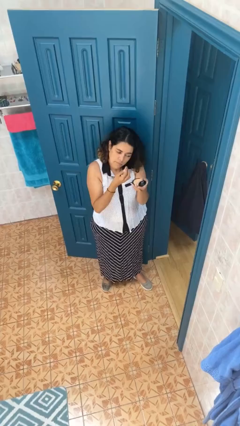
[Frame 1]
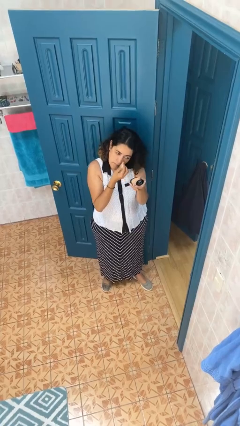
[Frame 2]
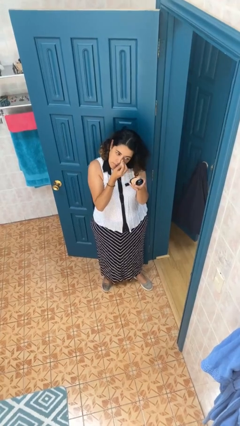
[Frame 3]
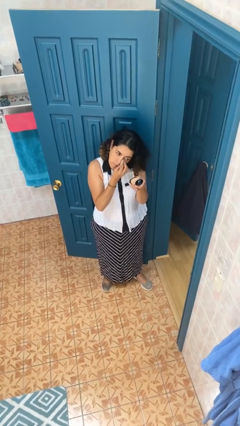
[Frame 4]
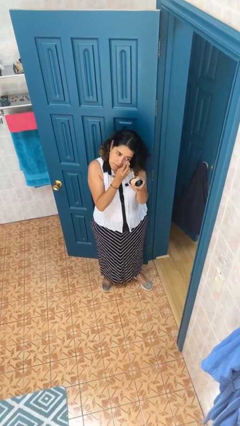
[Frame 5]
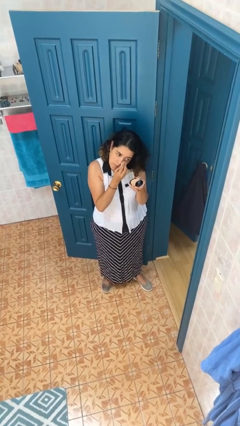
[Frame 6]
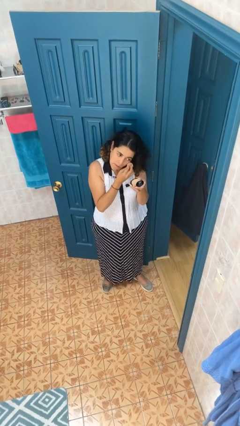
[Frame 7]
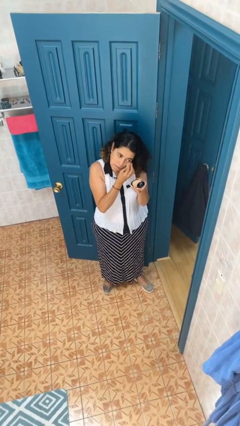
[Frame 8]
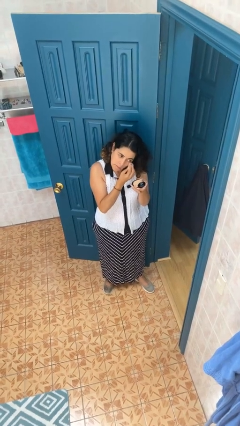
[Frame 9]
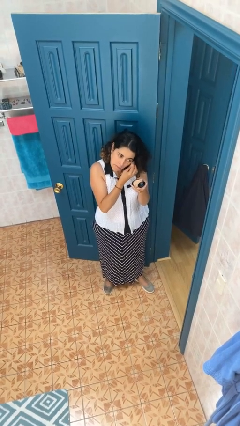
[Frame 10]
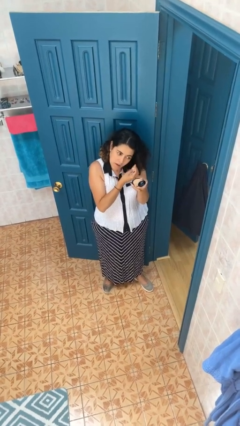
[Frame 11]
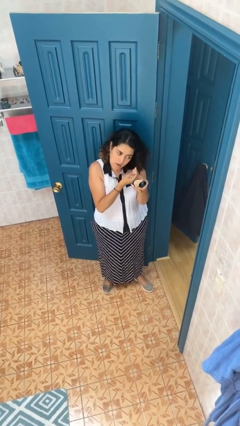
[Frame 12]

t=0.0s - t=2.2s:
person applies foundation makeup

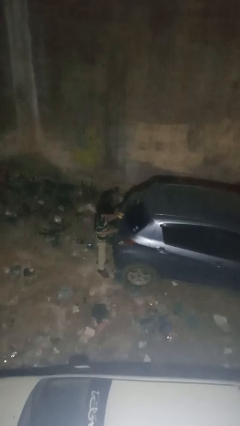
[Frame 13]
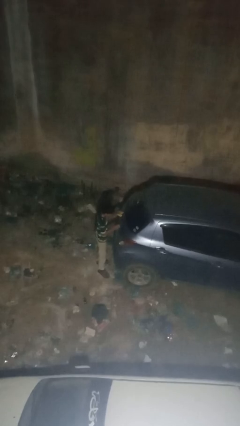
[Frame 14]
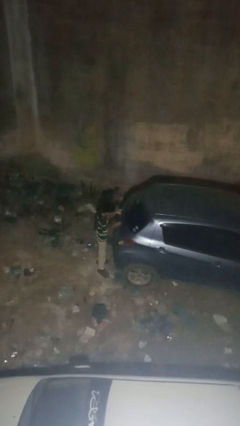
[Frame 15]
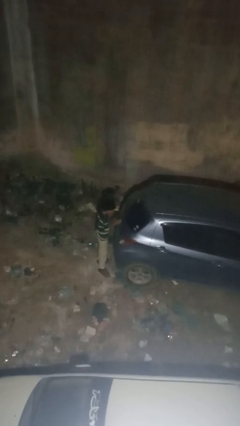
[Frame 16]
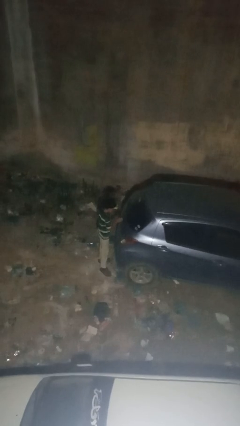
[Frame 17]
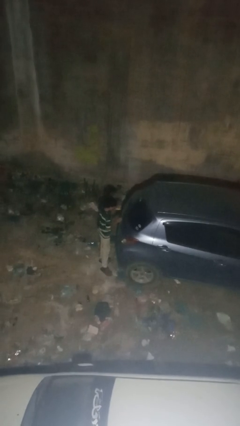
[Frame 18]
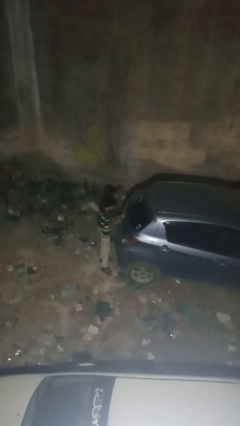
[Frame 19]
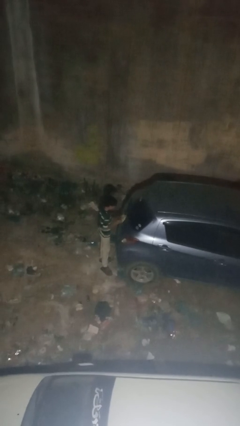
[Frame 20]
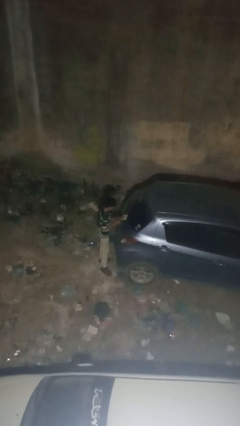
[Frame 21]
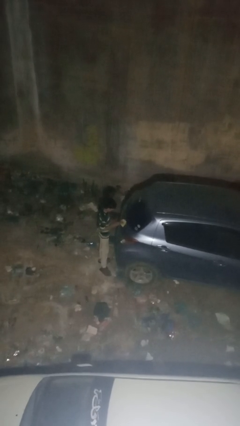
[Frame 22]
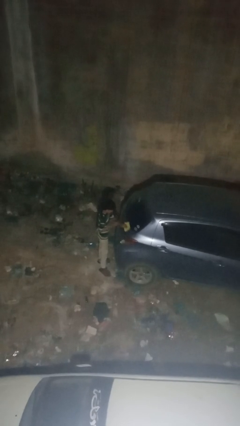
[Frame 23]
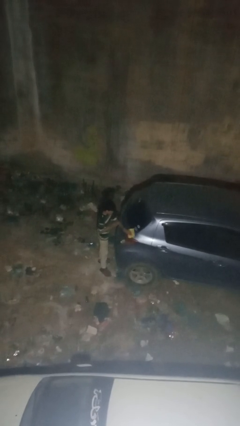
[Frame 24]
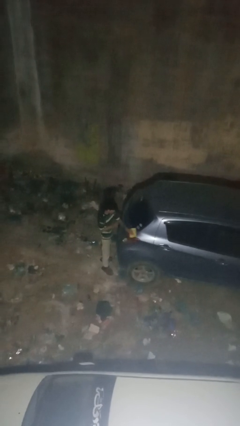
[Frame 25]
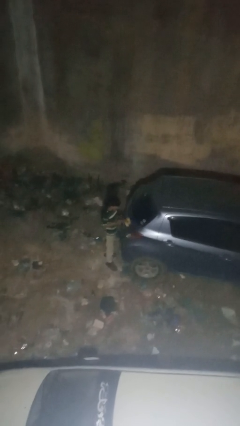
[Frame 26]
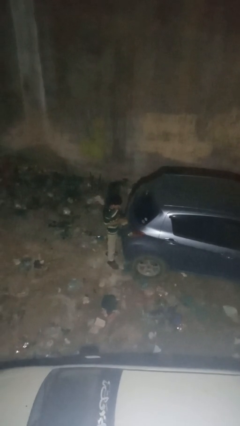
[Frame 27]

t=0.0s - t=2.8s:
person polishes car with rag

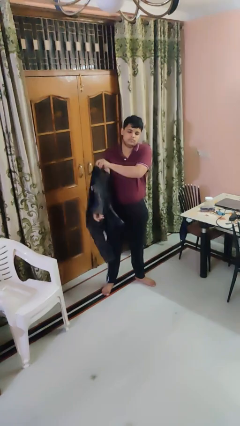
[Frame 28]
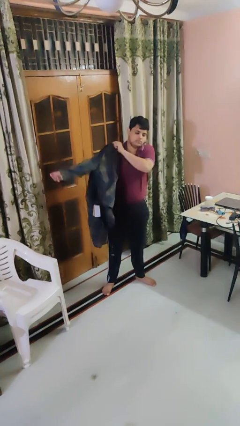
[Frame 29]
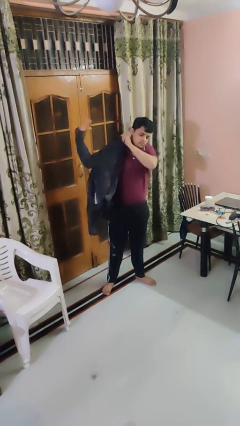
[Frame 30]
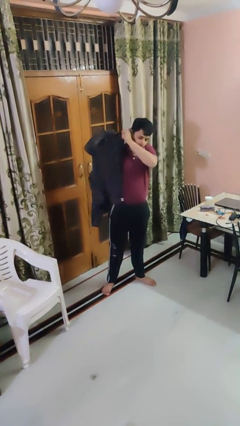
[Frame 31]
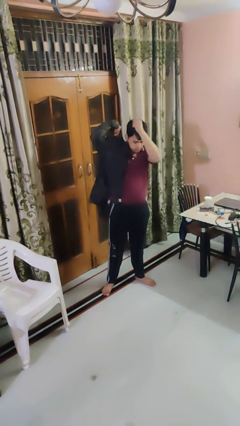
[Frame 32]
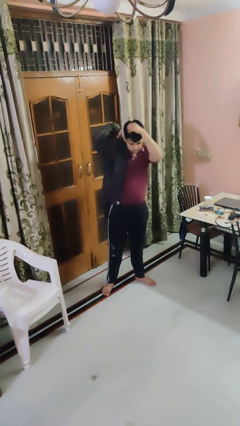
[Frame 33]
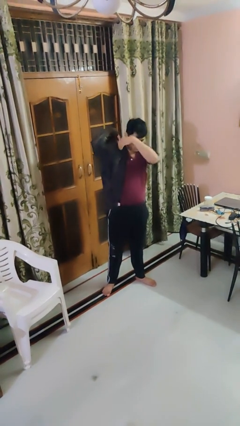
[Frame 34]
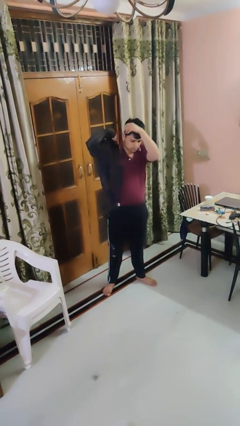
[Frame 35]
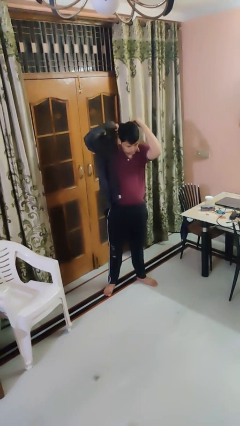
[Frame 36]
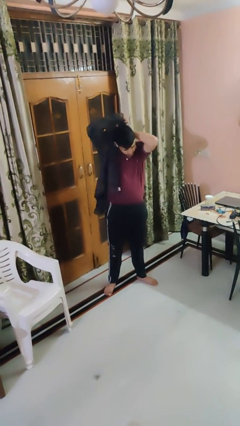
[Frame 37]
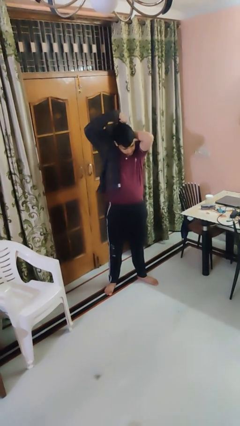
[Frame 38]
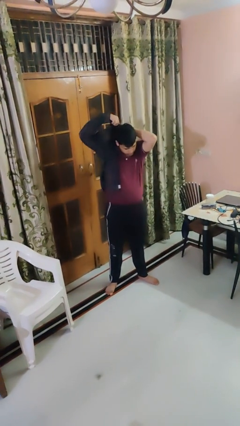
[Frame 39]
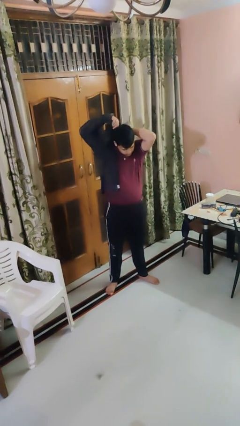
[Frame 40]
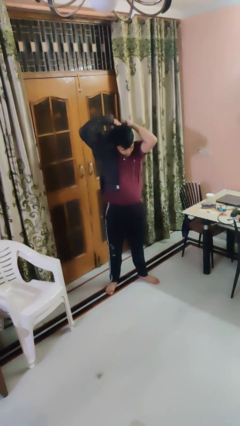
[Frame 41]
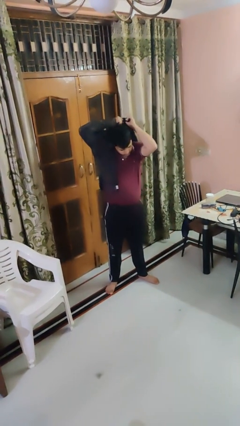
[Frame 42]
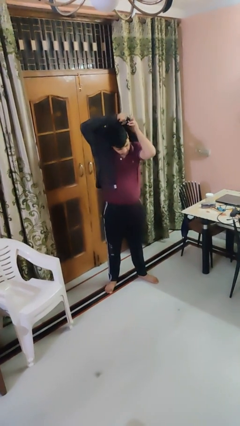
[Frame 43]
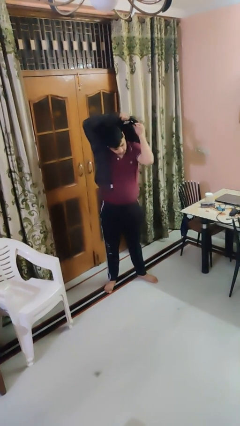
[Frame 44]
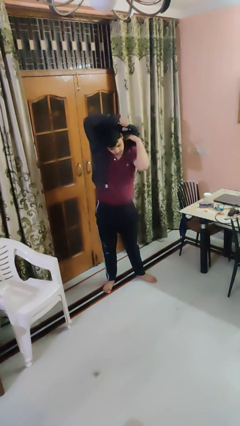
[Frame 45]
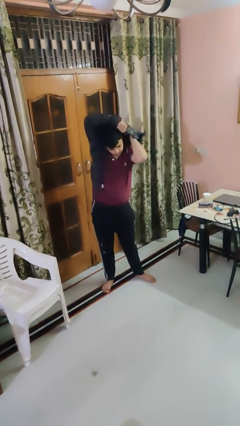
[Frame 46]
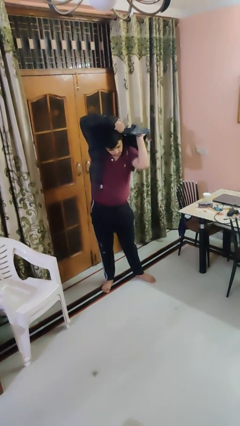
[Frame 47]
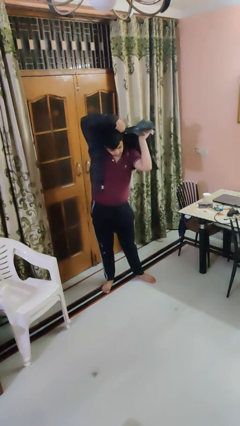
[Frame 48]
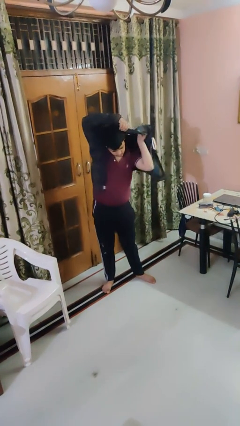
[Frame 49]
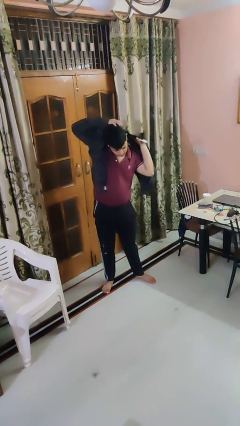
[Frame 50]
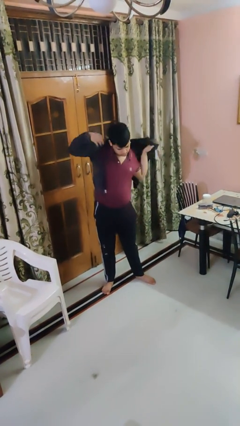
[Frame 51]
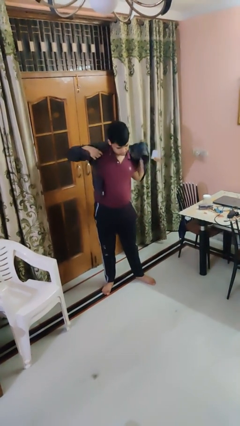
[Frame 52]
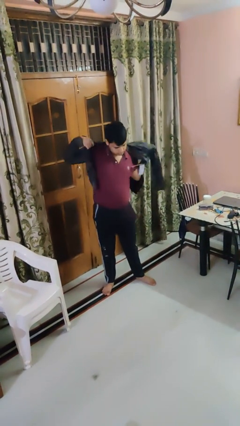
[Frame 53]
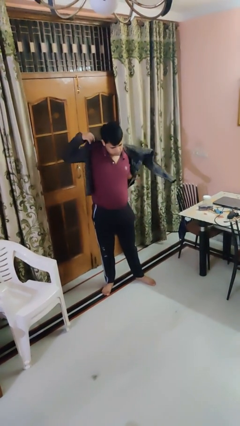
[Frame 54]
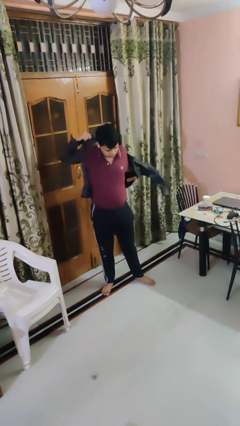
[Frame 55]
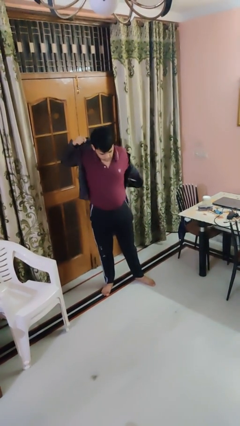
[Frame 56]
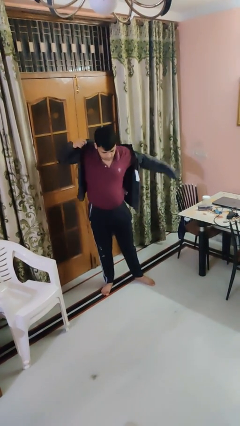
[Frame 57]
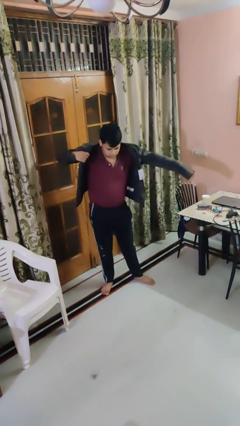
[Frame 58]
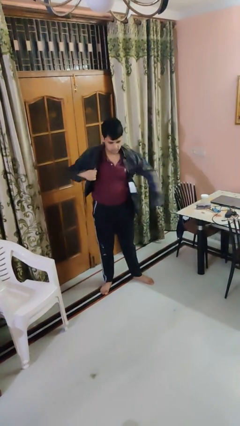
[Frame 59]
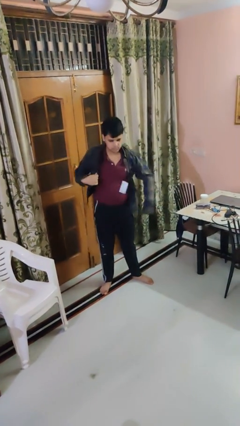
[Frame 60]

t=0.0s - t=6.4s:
person puts on shirt

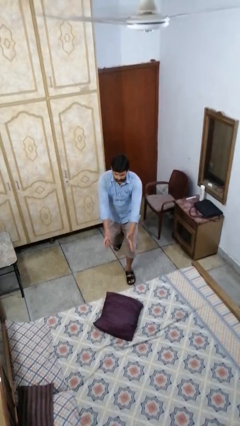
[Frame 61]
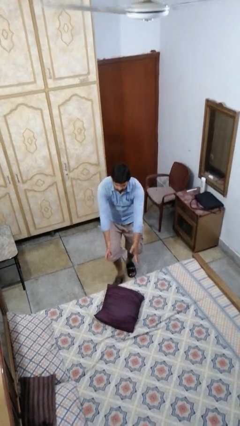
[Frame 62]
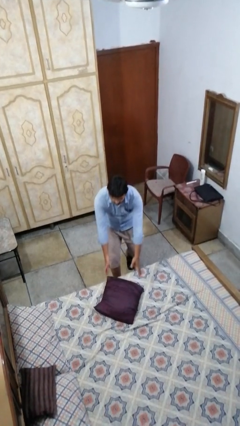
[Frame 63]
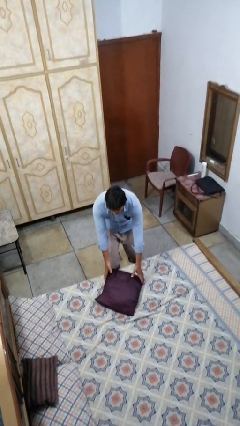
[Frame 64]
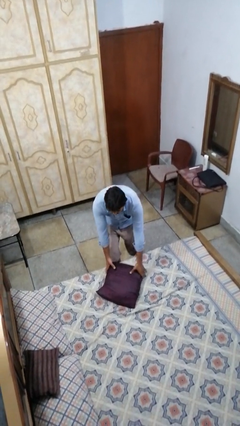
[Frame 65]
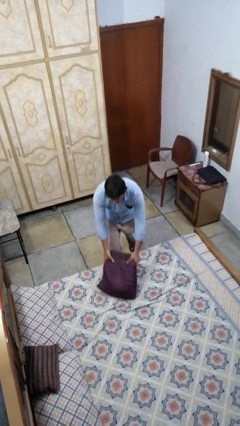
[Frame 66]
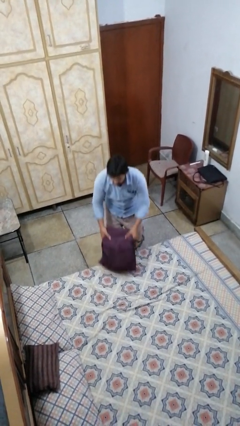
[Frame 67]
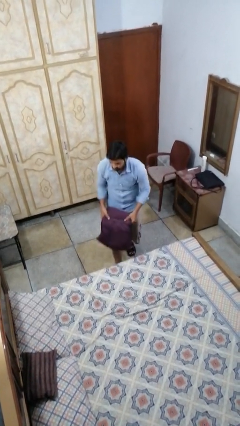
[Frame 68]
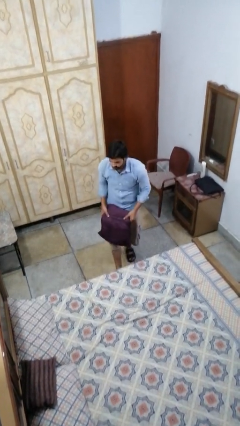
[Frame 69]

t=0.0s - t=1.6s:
person picks up object from bed

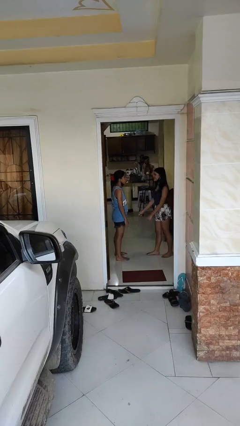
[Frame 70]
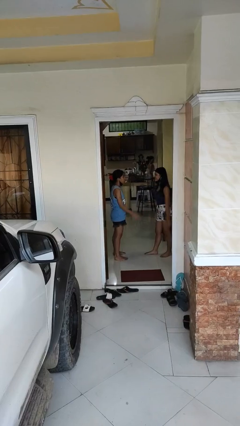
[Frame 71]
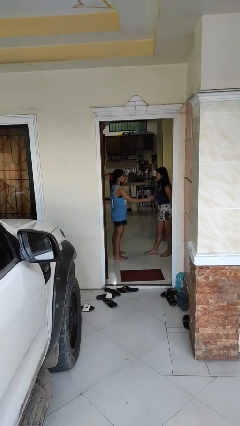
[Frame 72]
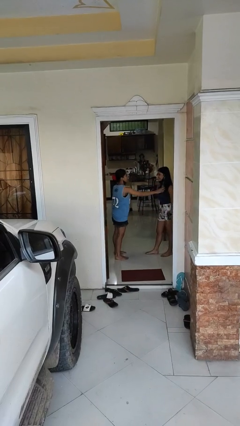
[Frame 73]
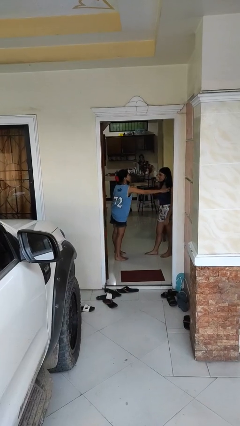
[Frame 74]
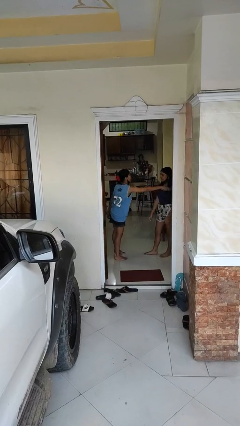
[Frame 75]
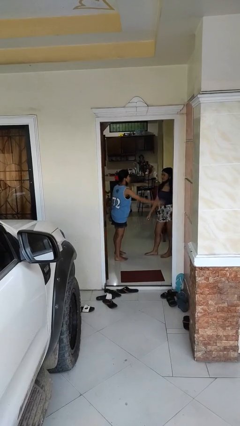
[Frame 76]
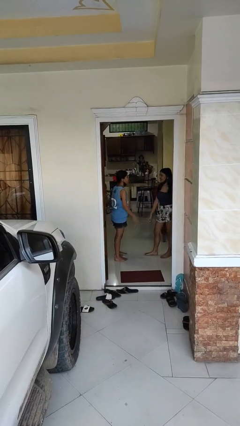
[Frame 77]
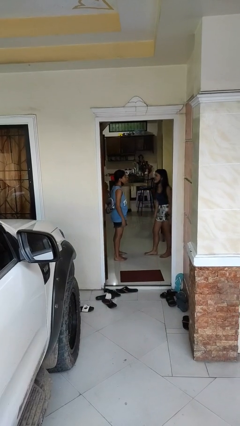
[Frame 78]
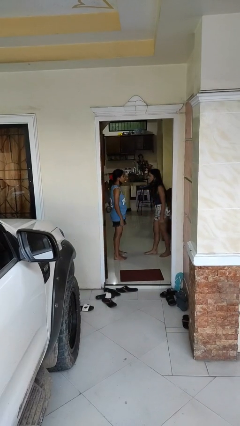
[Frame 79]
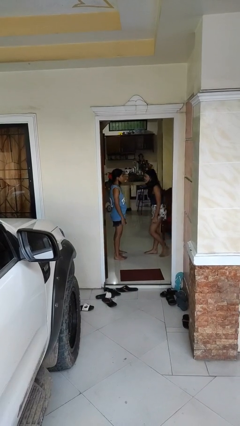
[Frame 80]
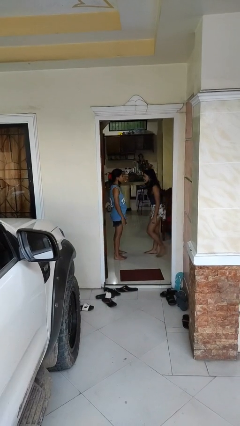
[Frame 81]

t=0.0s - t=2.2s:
person shoves person

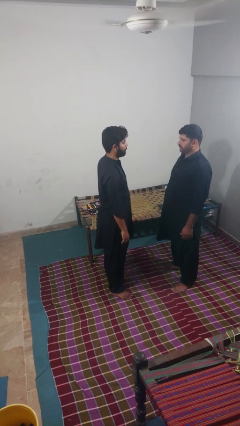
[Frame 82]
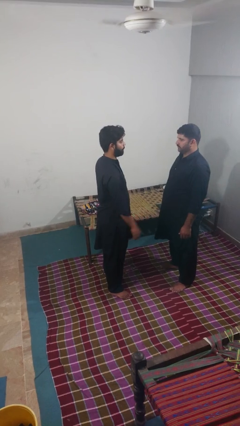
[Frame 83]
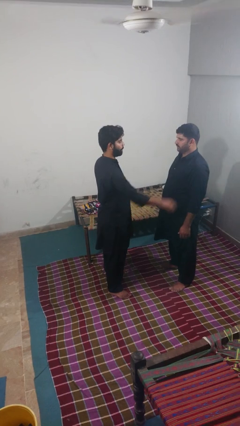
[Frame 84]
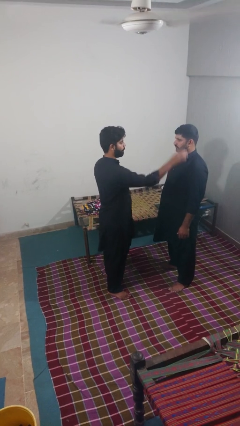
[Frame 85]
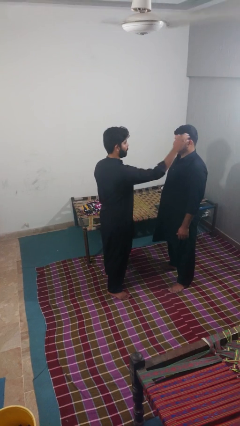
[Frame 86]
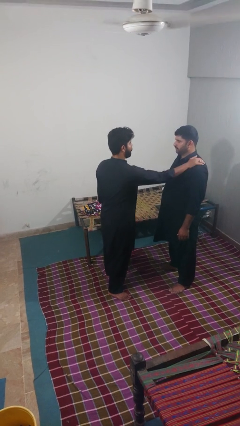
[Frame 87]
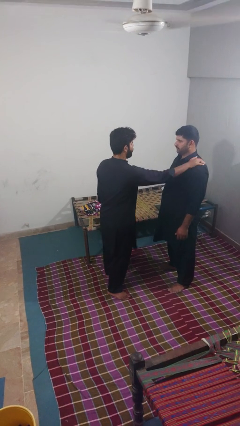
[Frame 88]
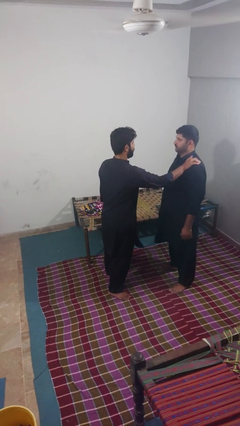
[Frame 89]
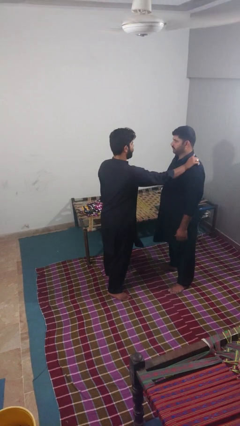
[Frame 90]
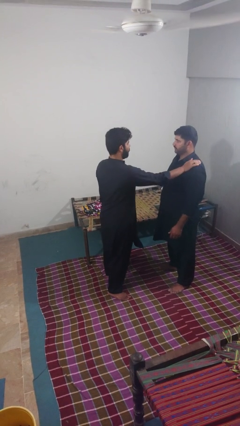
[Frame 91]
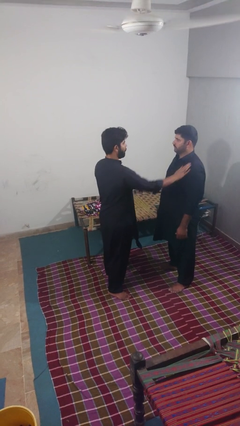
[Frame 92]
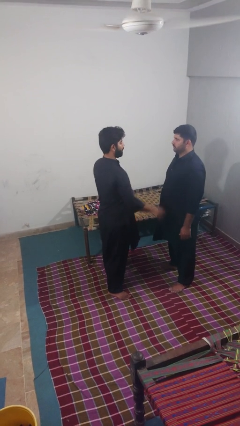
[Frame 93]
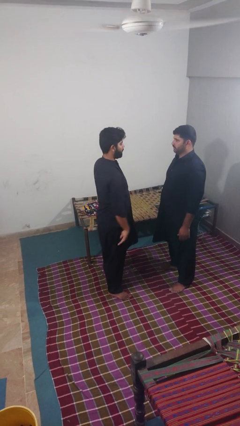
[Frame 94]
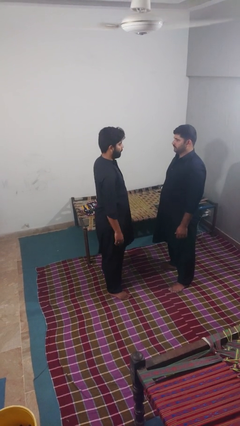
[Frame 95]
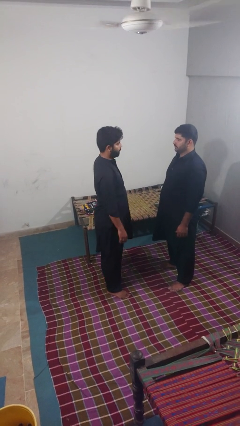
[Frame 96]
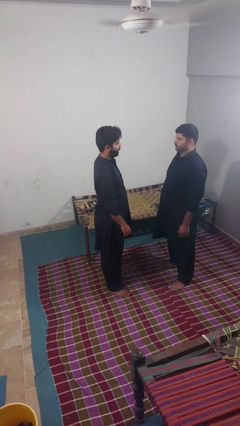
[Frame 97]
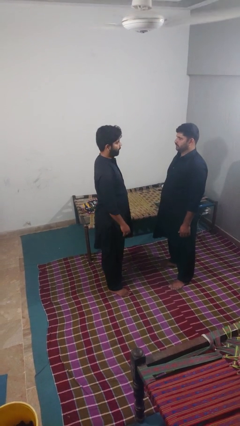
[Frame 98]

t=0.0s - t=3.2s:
person pounds shoulders of person
